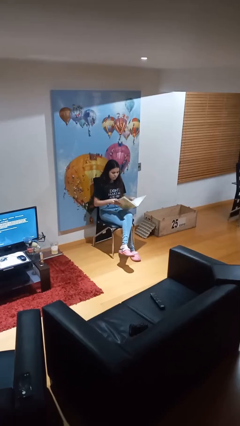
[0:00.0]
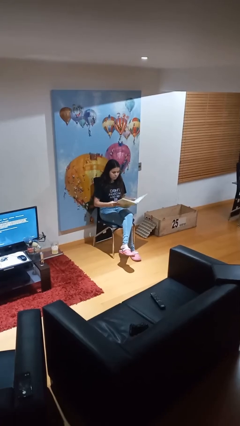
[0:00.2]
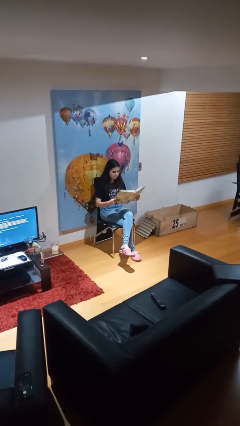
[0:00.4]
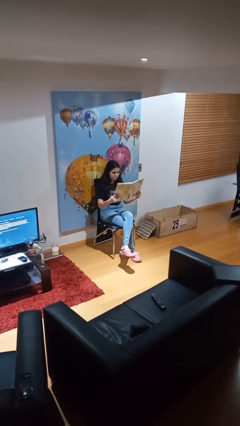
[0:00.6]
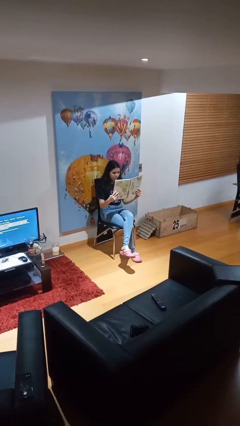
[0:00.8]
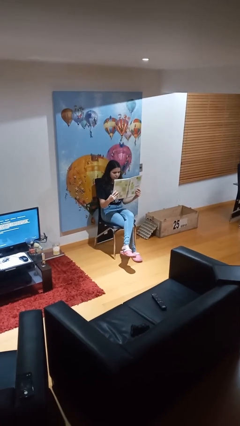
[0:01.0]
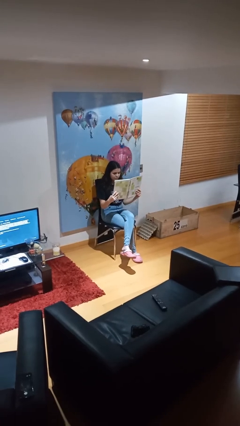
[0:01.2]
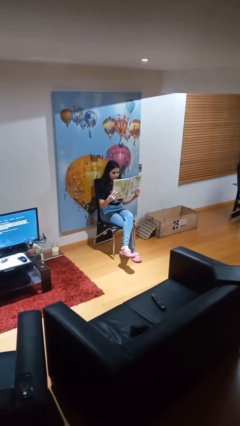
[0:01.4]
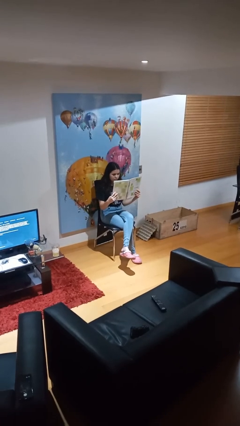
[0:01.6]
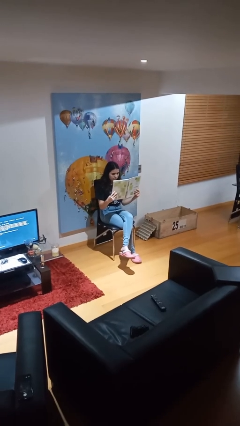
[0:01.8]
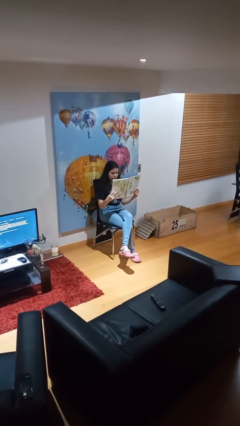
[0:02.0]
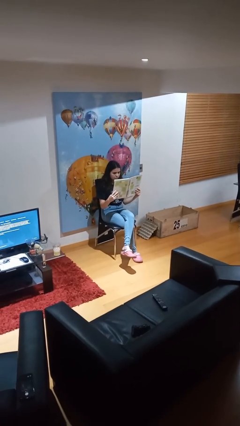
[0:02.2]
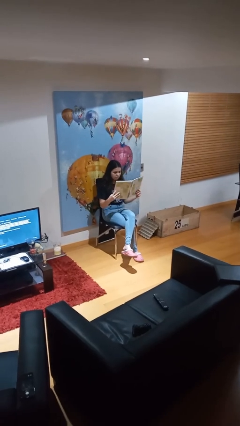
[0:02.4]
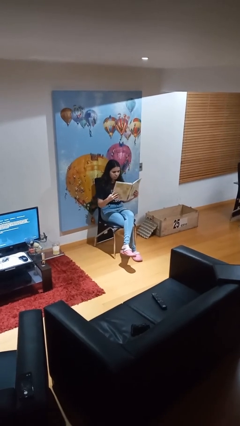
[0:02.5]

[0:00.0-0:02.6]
person reads document

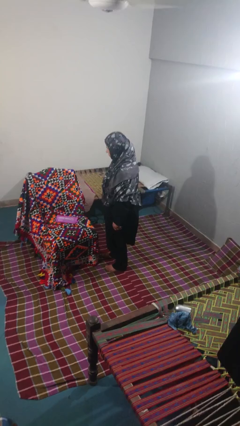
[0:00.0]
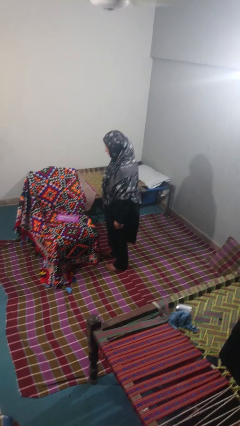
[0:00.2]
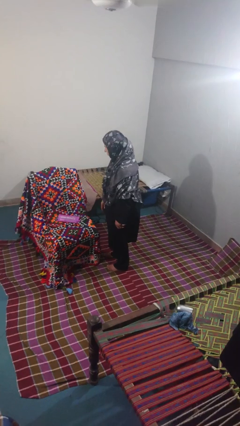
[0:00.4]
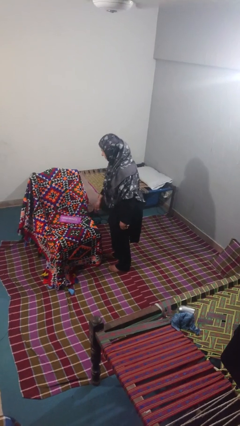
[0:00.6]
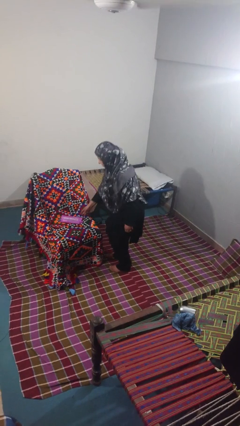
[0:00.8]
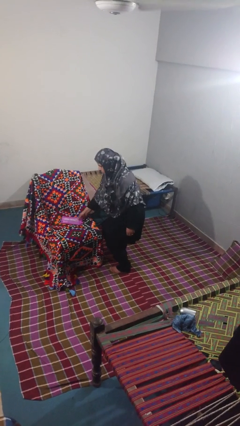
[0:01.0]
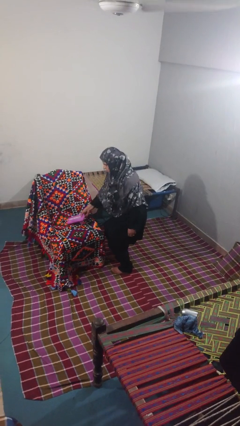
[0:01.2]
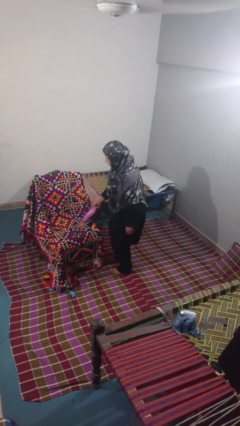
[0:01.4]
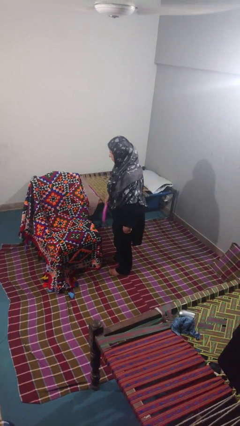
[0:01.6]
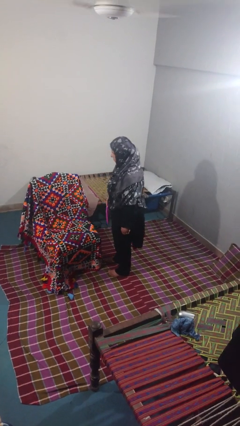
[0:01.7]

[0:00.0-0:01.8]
person picks up object from couch

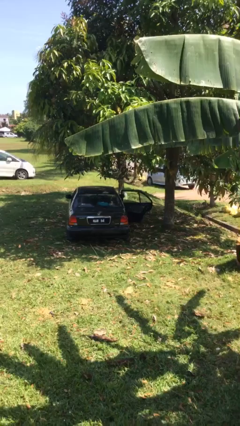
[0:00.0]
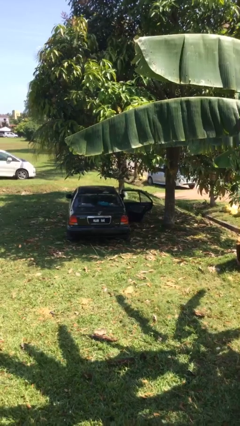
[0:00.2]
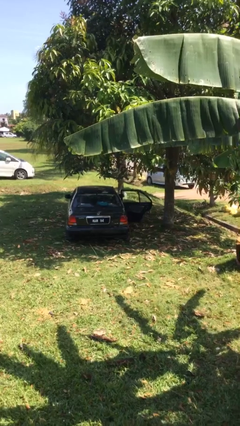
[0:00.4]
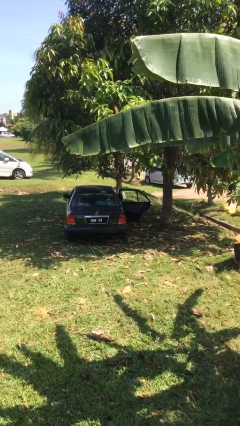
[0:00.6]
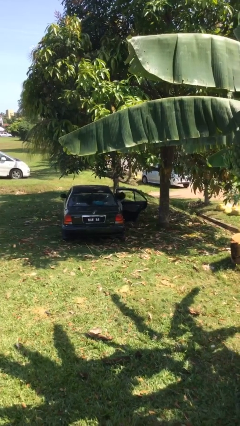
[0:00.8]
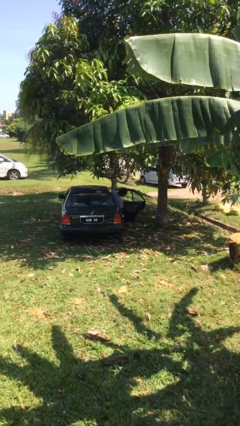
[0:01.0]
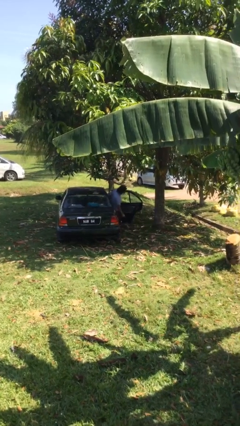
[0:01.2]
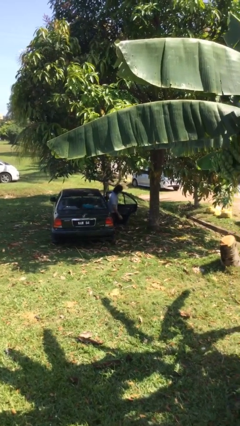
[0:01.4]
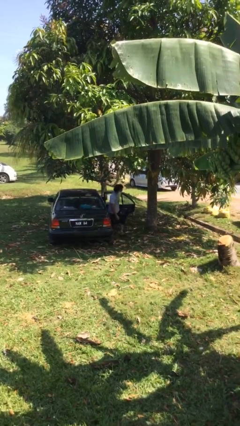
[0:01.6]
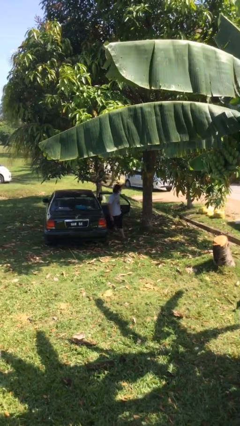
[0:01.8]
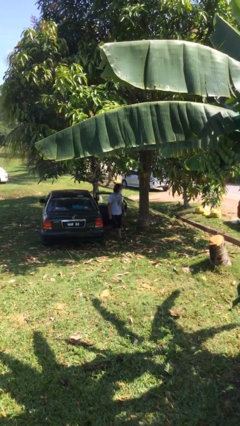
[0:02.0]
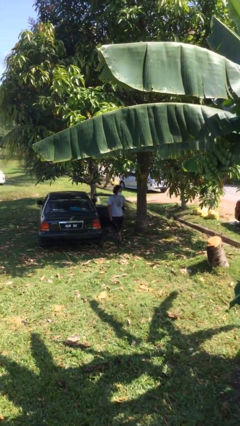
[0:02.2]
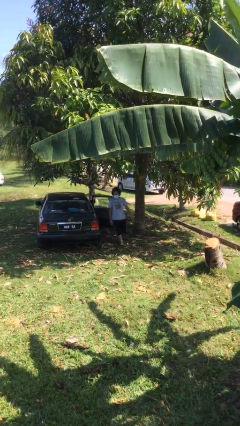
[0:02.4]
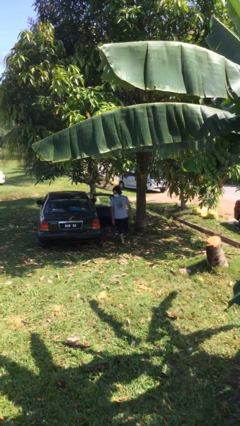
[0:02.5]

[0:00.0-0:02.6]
person exits car

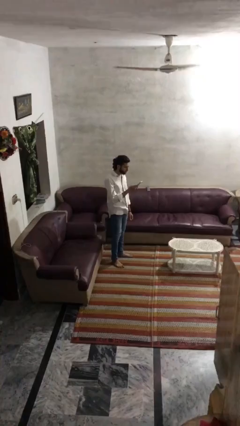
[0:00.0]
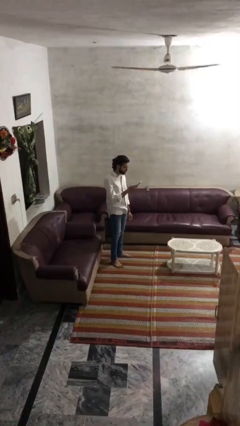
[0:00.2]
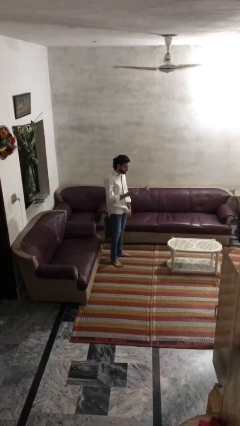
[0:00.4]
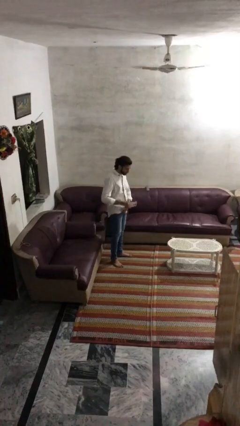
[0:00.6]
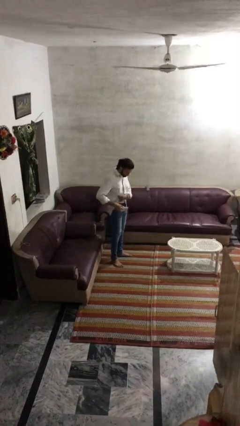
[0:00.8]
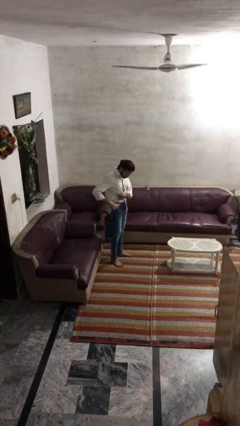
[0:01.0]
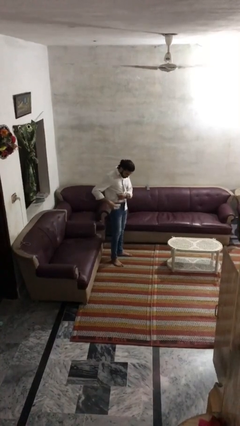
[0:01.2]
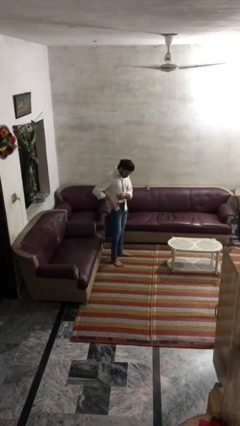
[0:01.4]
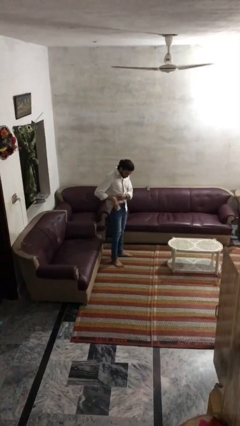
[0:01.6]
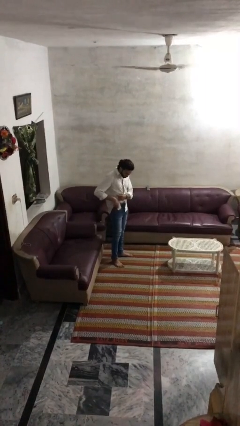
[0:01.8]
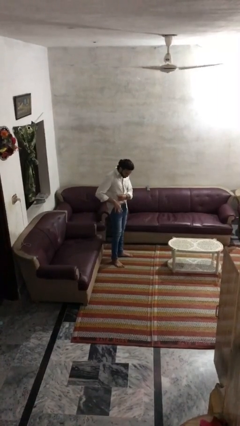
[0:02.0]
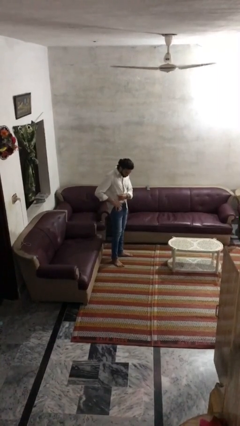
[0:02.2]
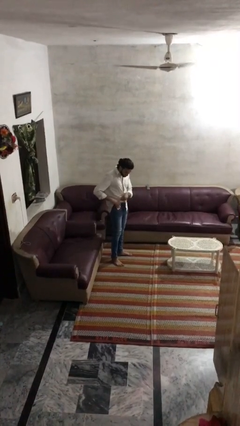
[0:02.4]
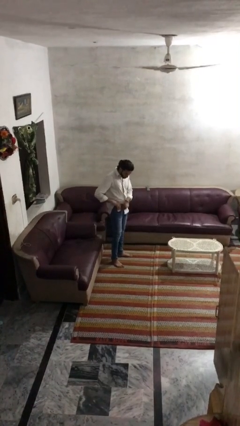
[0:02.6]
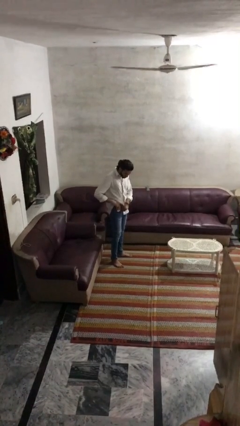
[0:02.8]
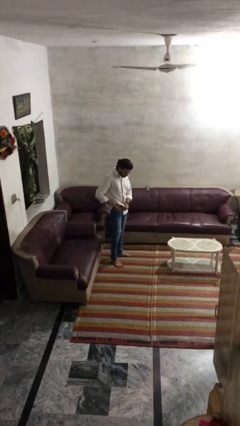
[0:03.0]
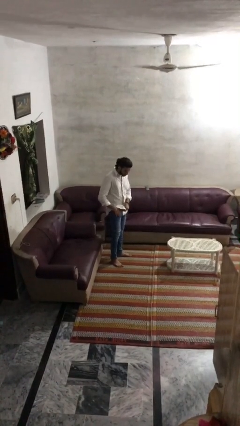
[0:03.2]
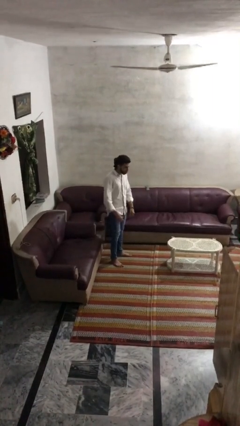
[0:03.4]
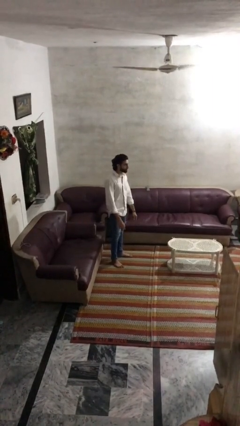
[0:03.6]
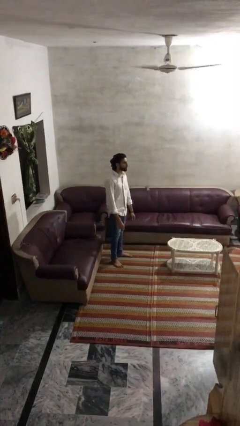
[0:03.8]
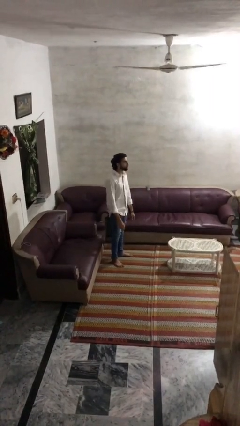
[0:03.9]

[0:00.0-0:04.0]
person puts phone into pocket

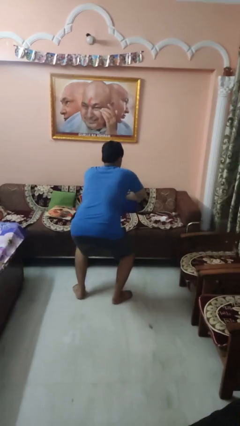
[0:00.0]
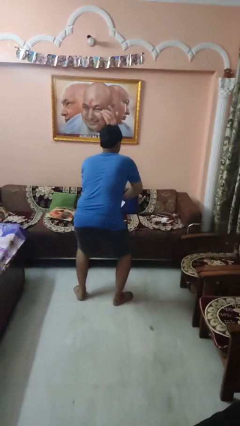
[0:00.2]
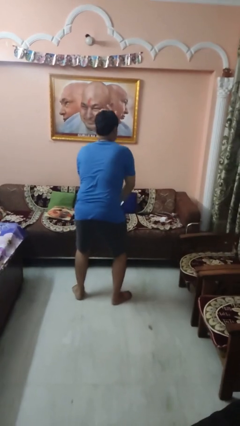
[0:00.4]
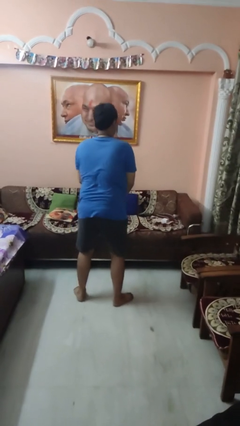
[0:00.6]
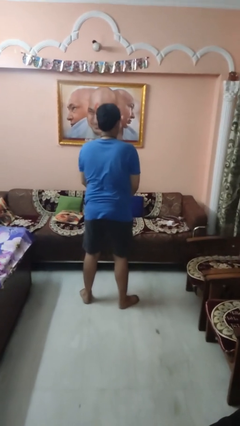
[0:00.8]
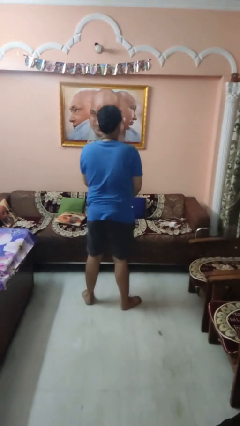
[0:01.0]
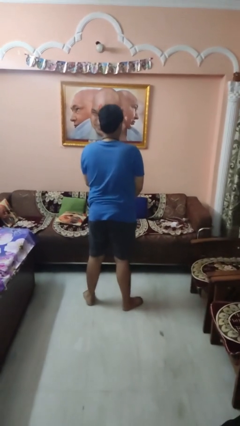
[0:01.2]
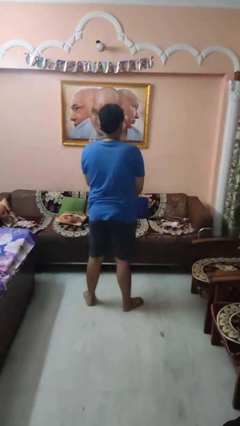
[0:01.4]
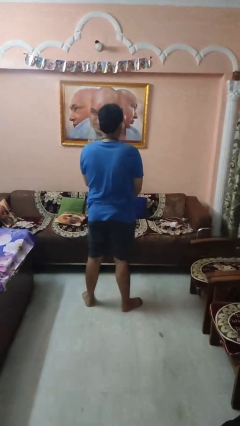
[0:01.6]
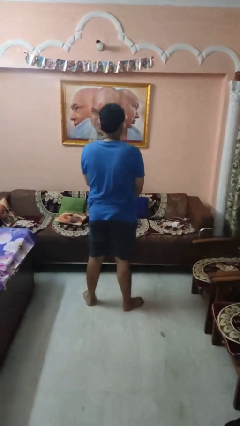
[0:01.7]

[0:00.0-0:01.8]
person stands up

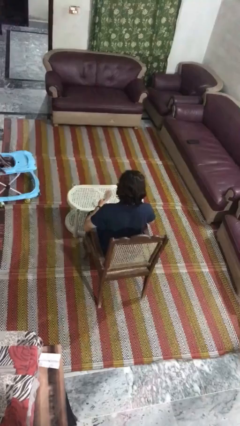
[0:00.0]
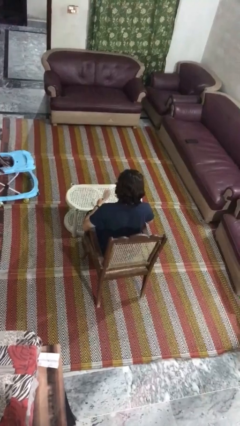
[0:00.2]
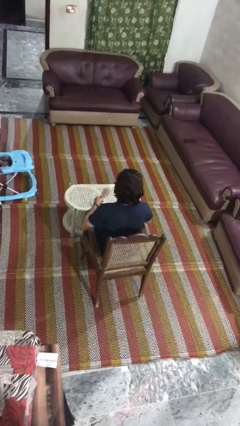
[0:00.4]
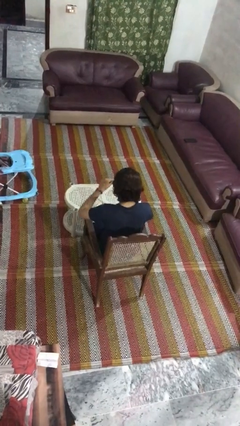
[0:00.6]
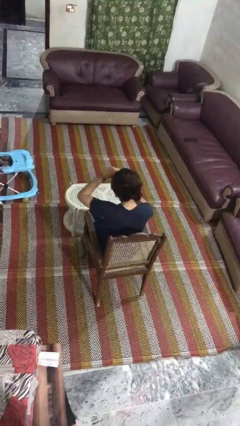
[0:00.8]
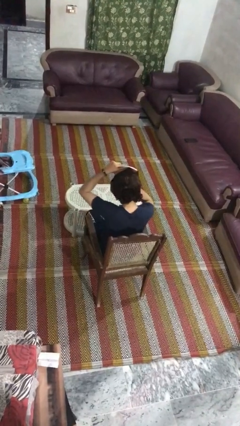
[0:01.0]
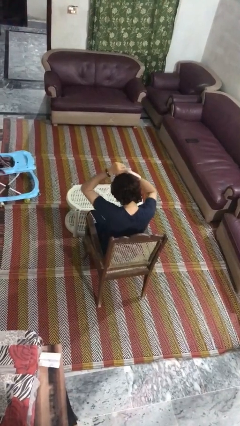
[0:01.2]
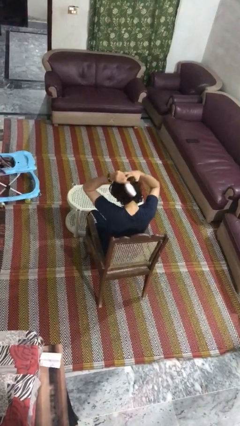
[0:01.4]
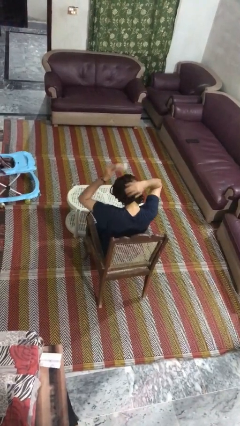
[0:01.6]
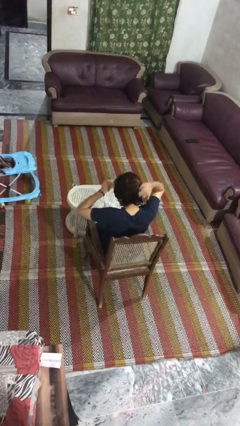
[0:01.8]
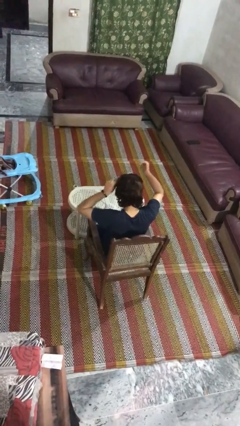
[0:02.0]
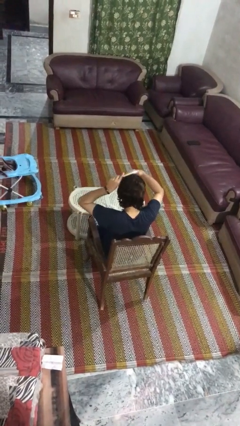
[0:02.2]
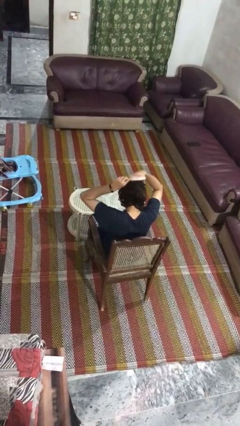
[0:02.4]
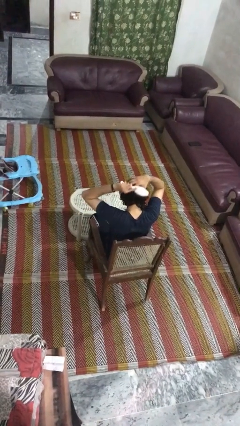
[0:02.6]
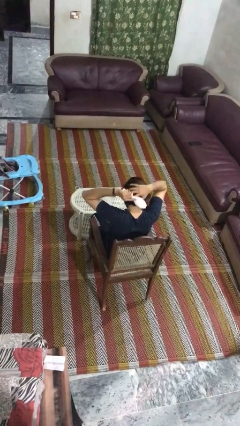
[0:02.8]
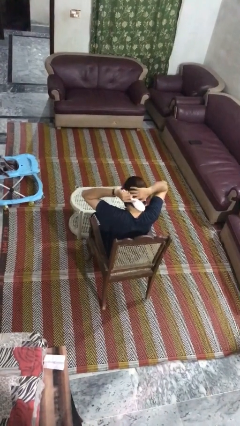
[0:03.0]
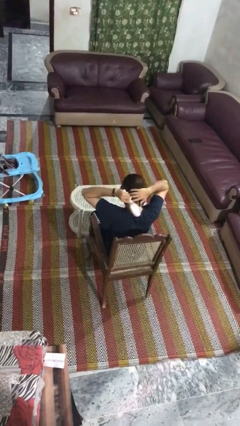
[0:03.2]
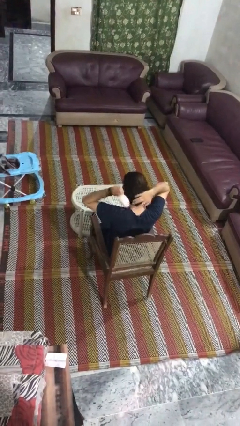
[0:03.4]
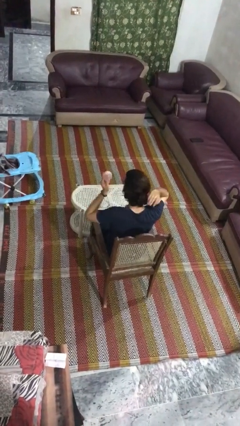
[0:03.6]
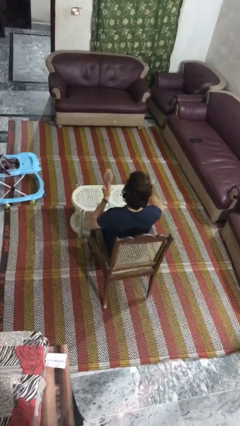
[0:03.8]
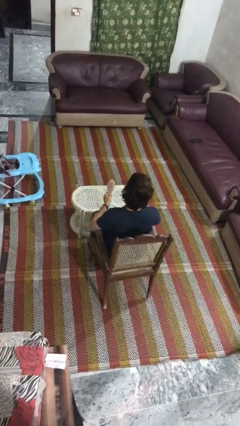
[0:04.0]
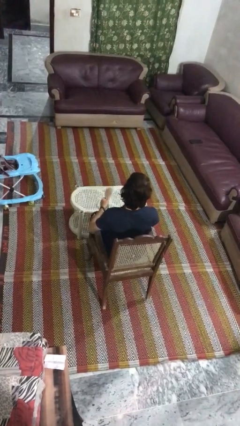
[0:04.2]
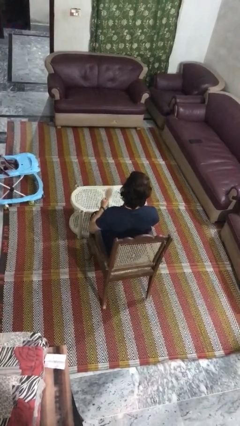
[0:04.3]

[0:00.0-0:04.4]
person brushes hair
